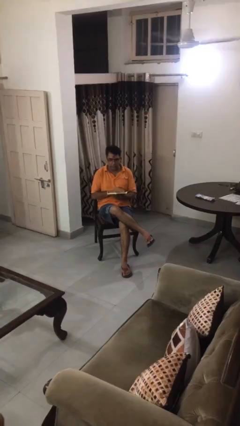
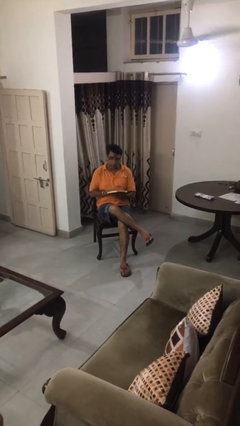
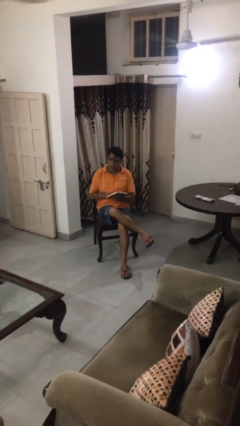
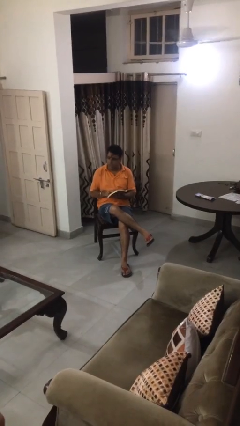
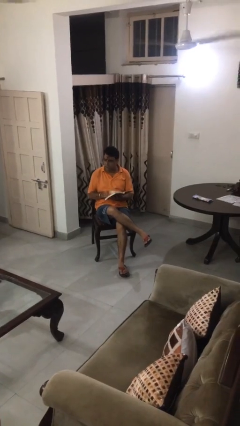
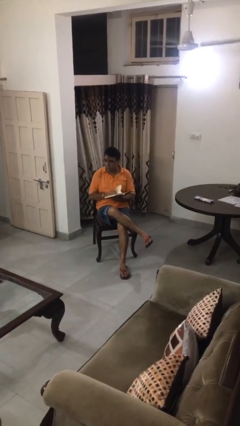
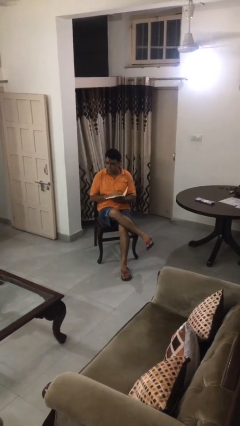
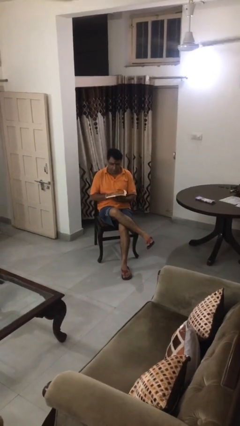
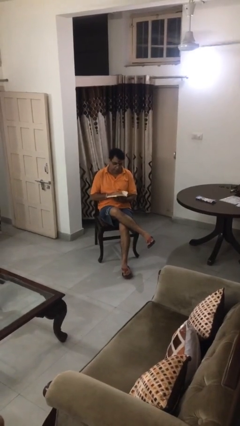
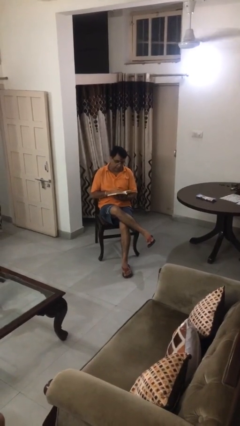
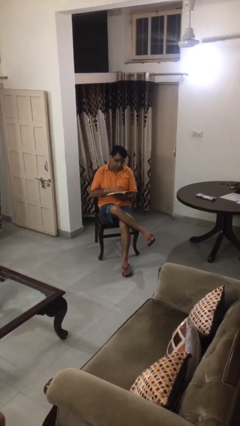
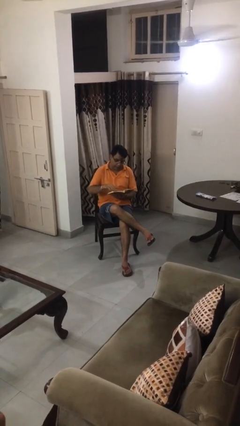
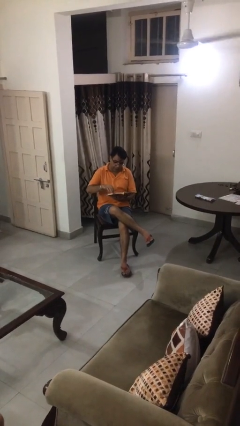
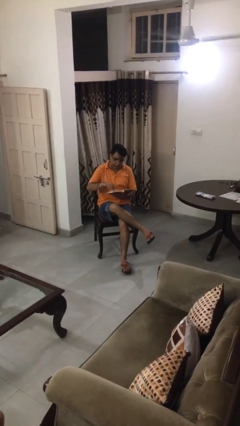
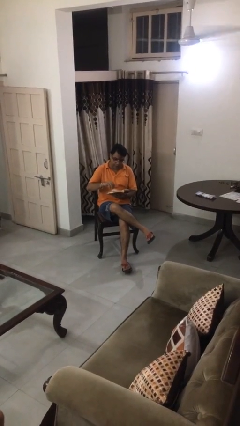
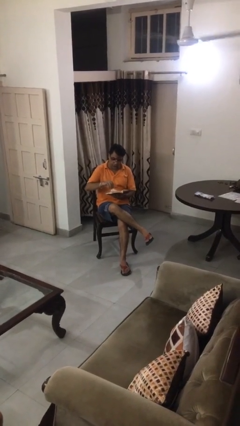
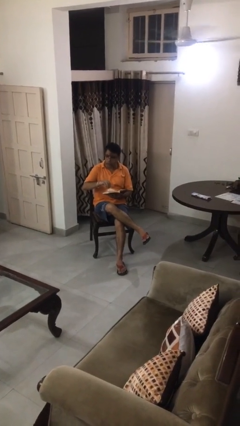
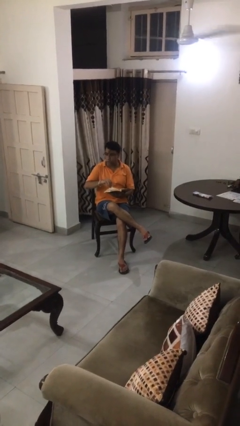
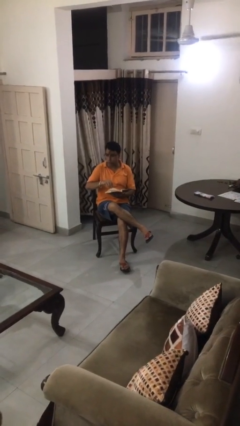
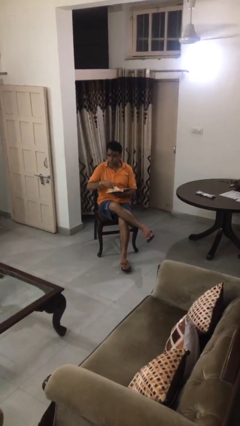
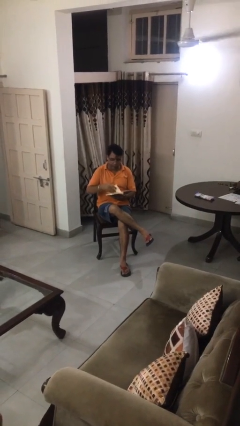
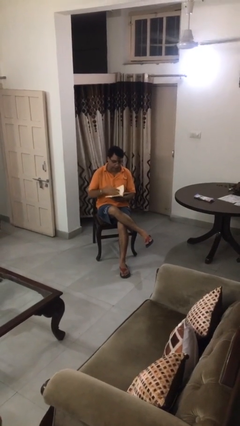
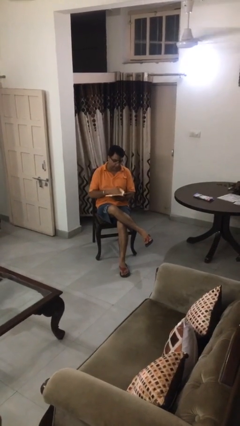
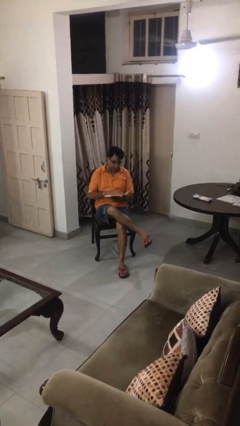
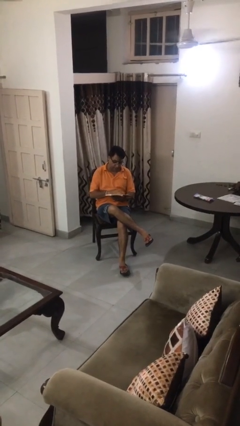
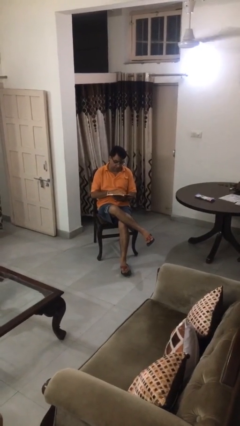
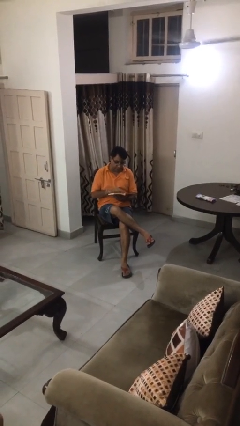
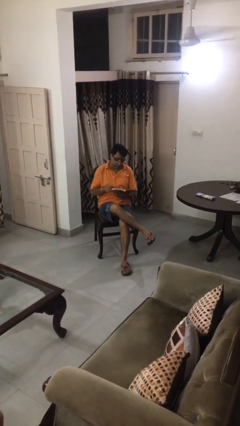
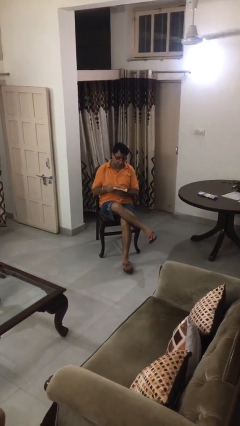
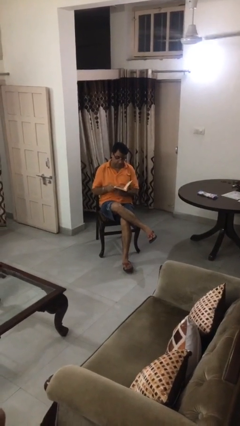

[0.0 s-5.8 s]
person reads book

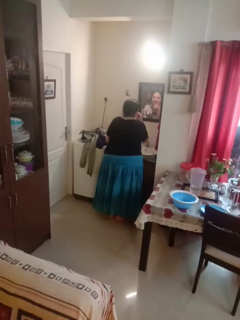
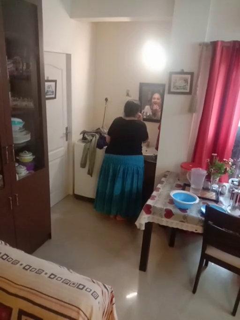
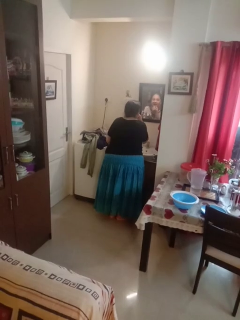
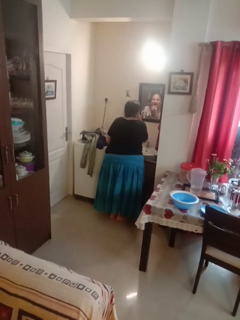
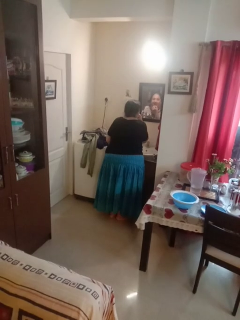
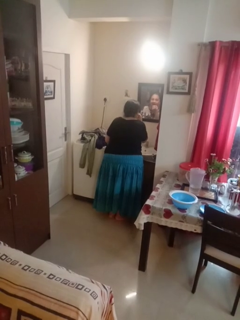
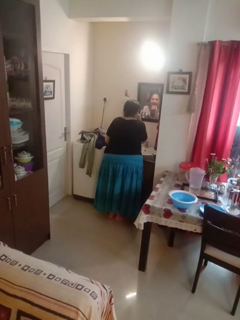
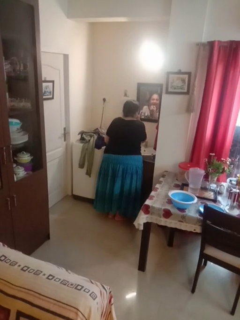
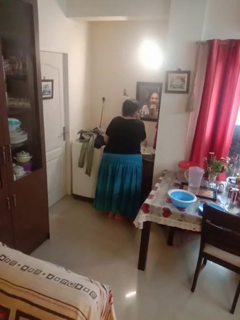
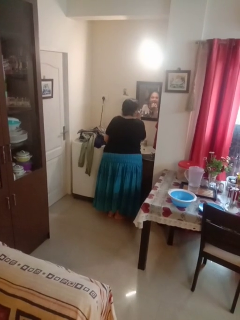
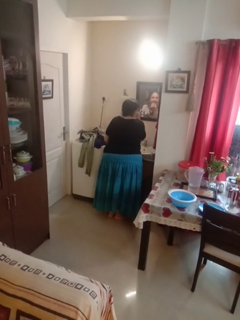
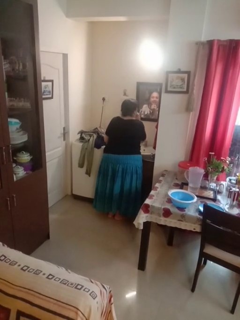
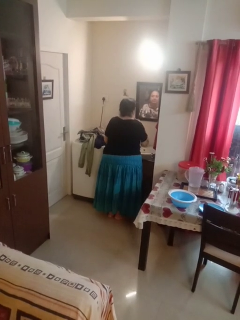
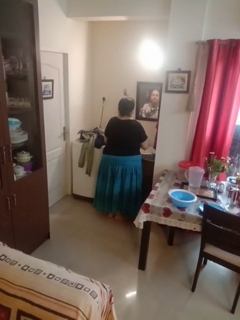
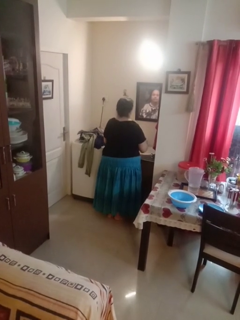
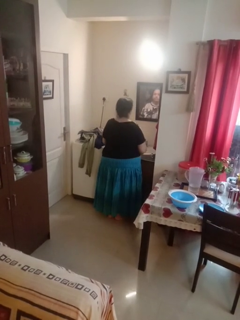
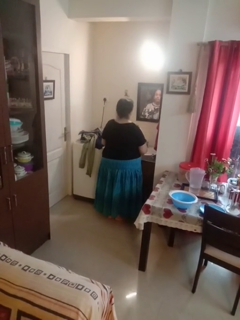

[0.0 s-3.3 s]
person applies lip makeup

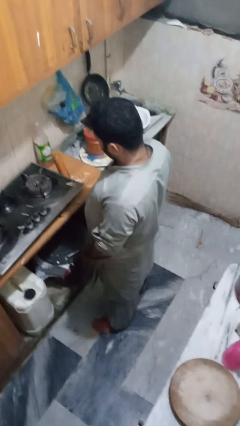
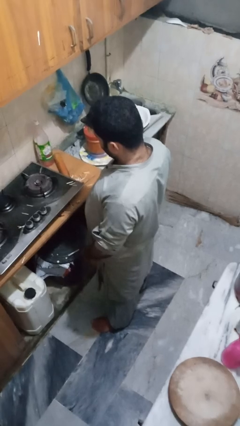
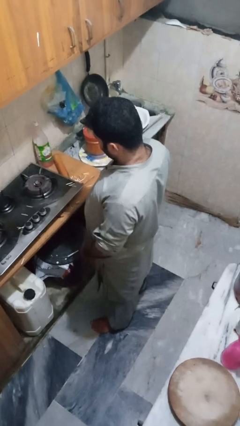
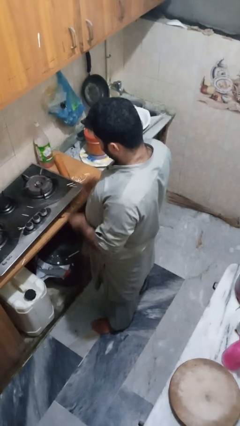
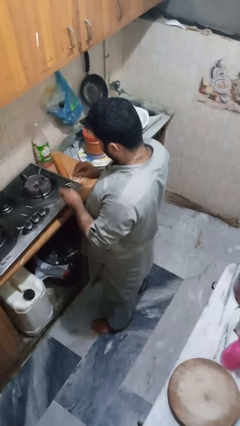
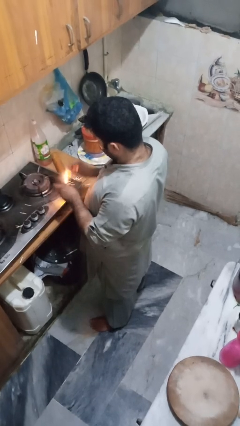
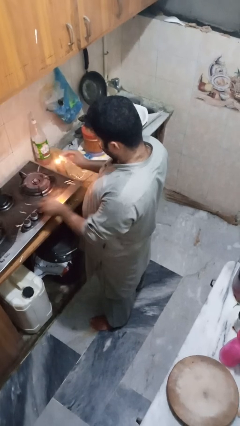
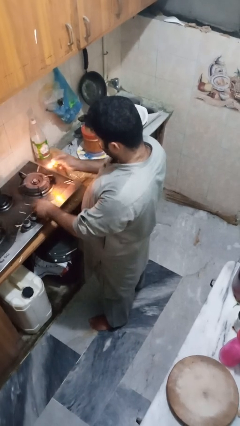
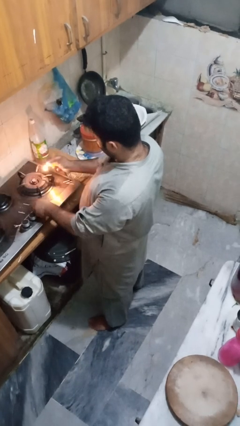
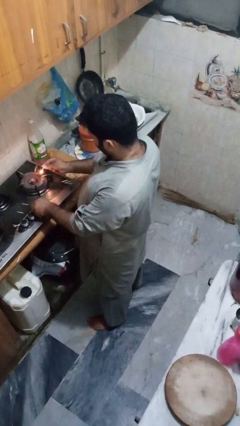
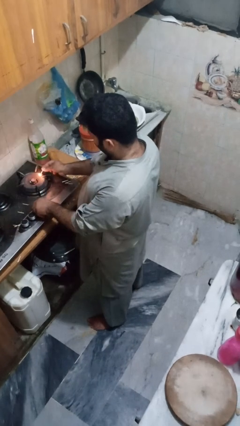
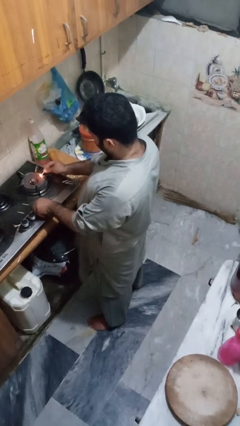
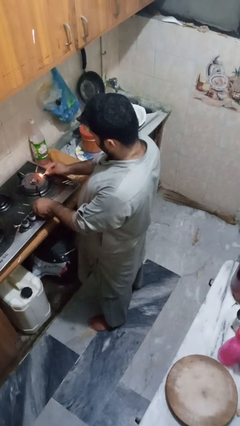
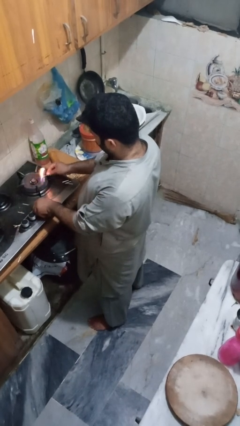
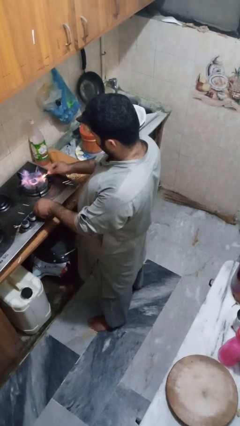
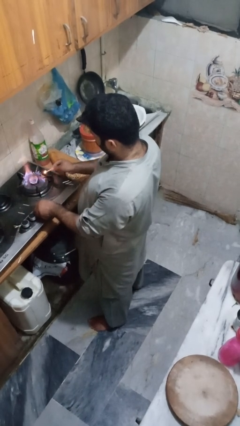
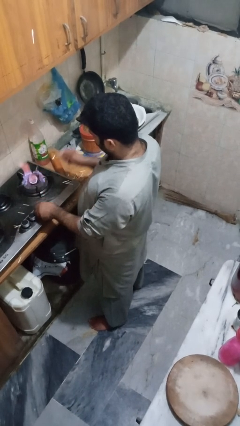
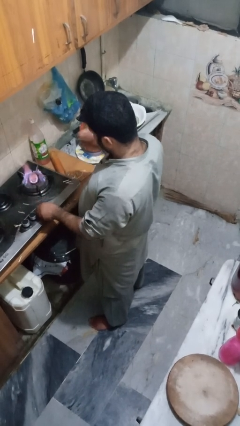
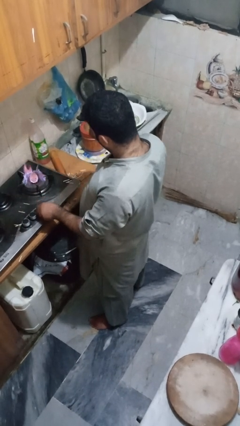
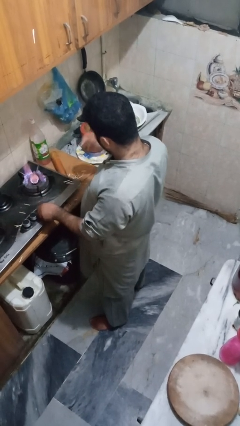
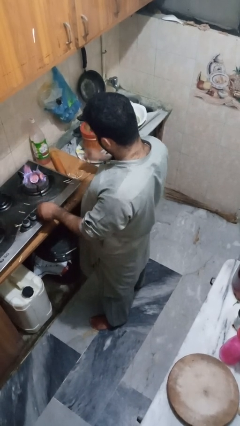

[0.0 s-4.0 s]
person turns on stovetop

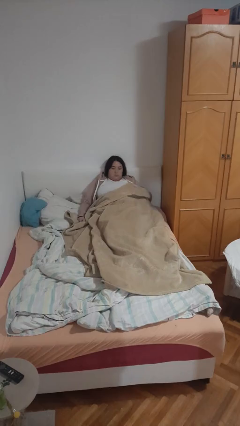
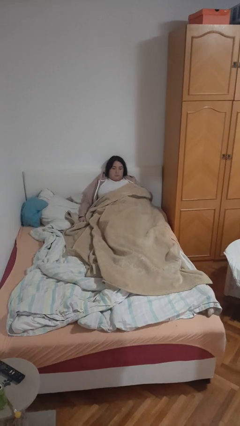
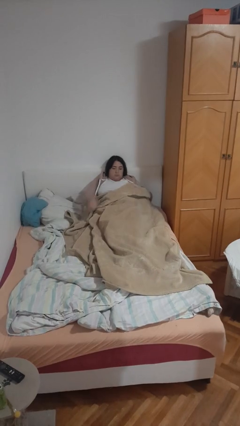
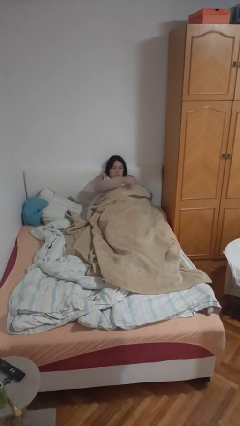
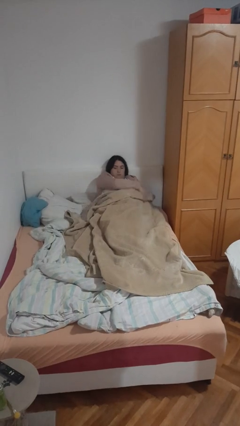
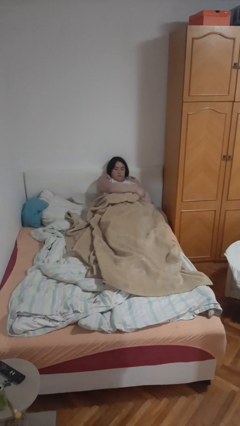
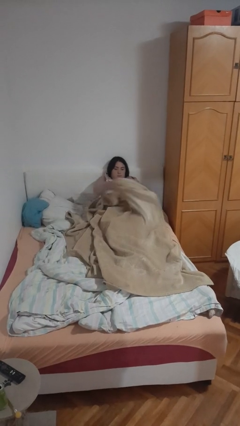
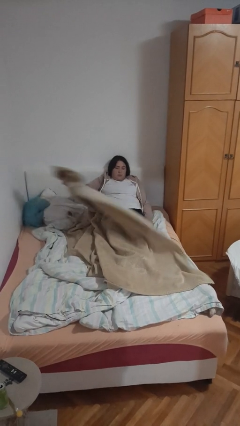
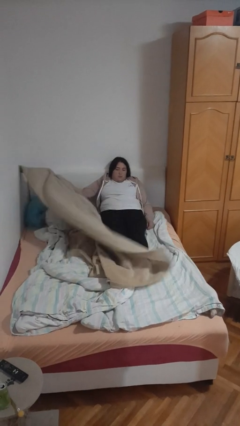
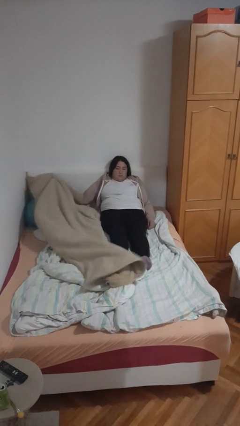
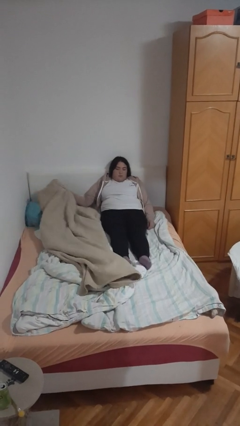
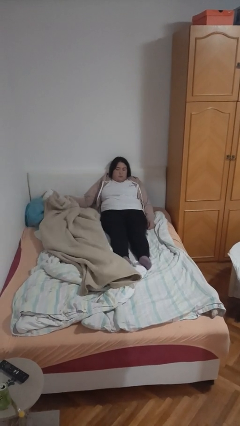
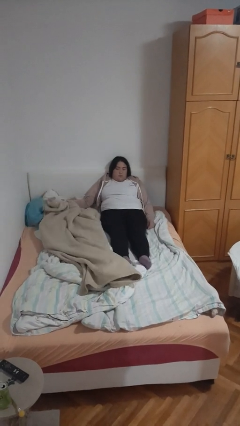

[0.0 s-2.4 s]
person uncovers with blanket

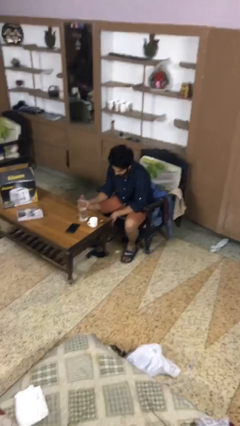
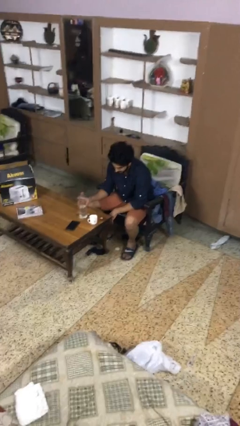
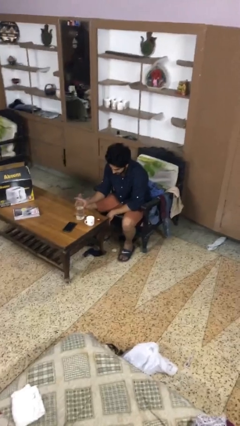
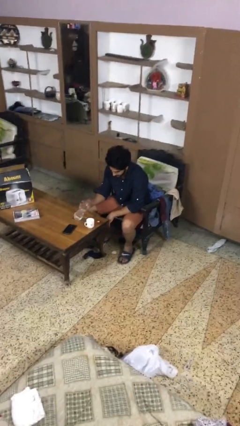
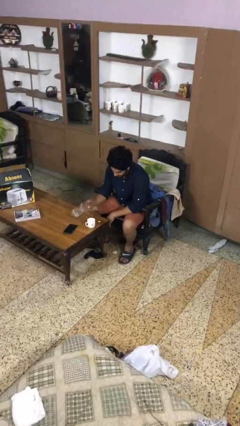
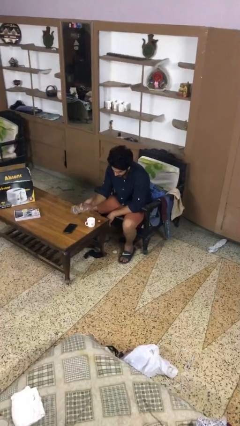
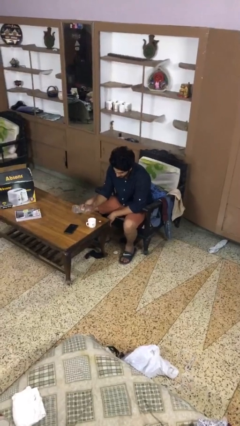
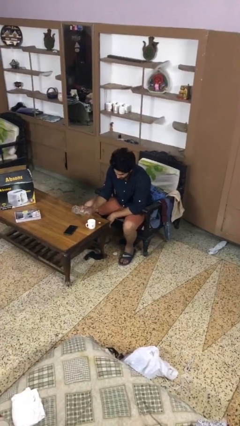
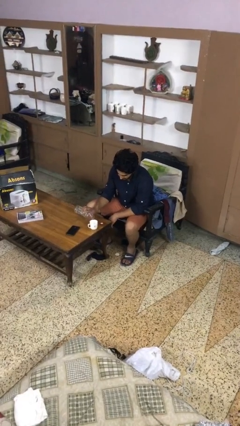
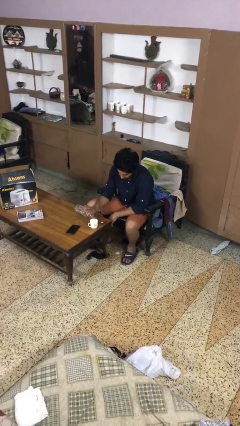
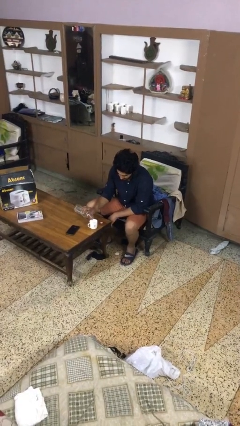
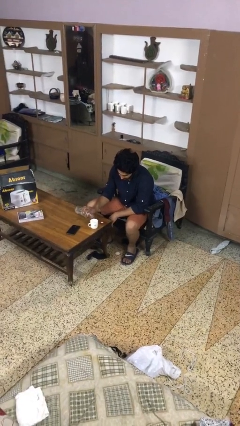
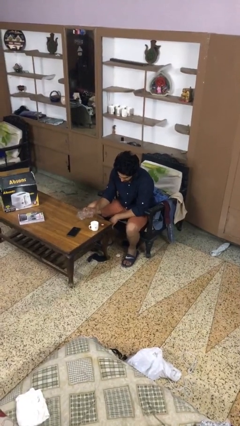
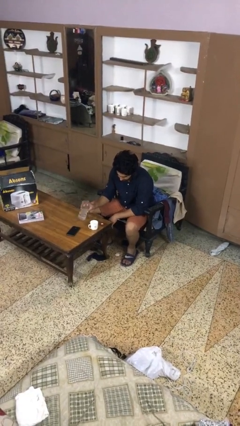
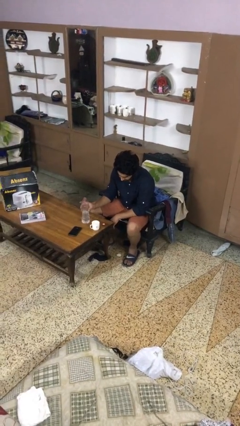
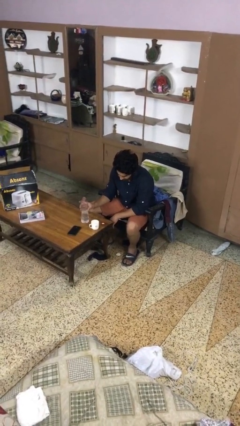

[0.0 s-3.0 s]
person pours liquid into cup

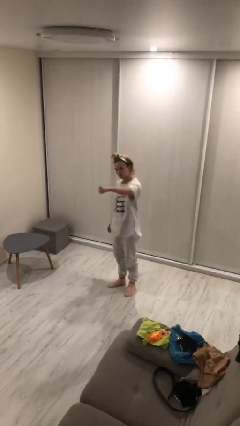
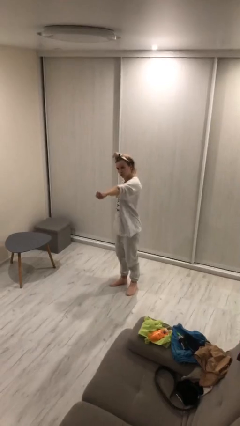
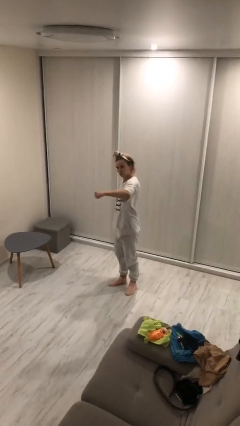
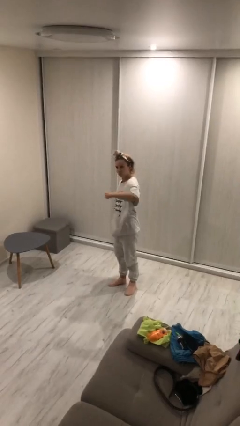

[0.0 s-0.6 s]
person karate chop
